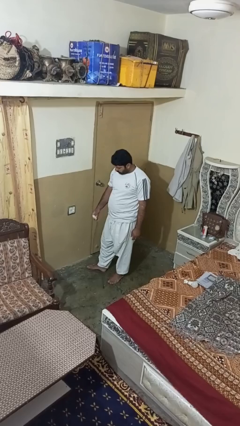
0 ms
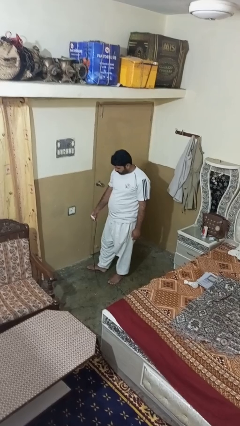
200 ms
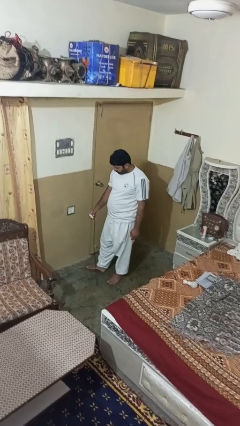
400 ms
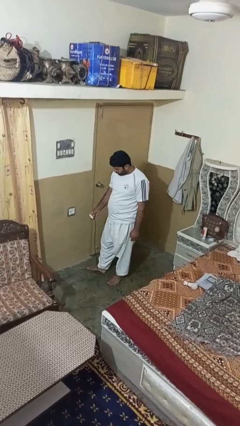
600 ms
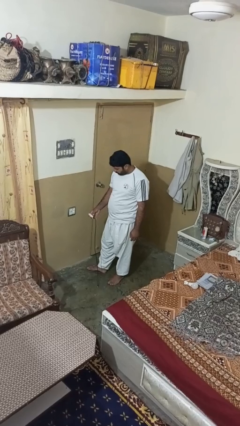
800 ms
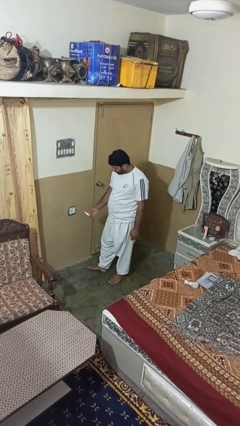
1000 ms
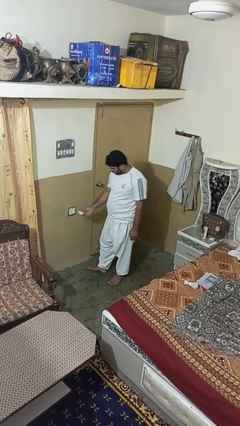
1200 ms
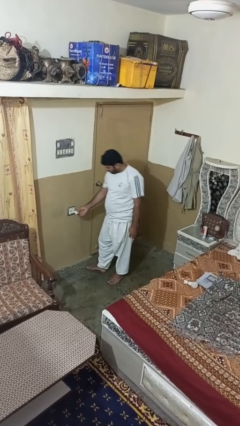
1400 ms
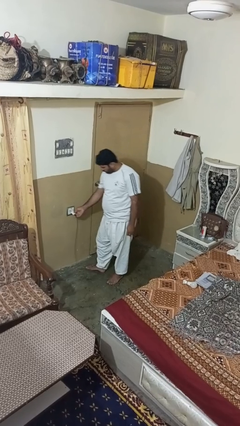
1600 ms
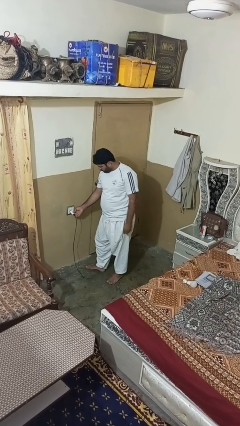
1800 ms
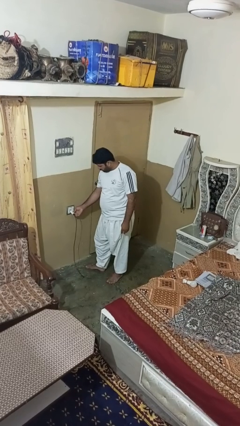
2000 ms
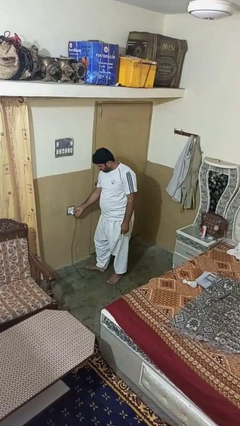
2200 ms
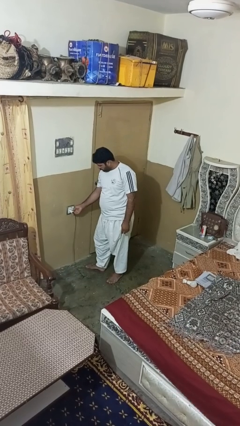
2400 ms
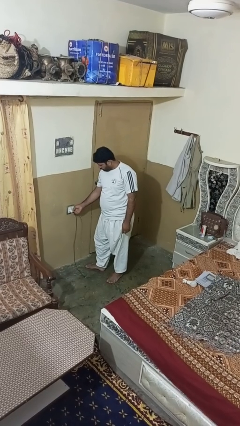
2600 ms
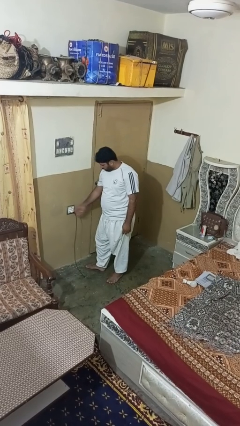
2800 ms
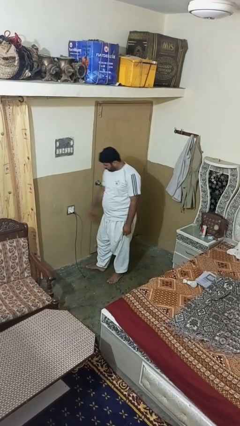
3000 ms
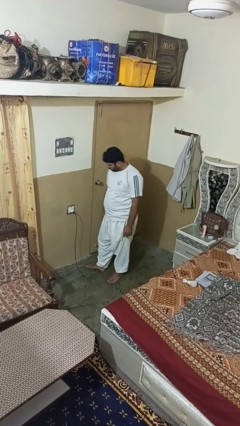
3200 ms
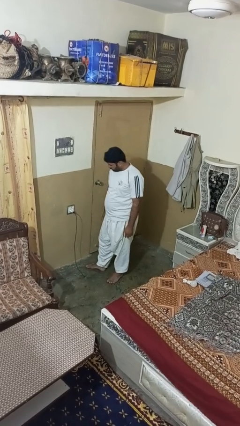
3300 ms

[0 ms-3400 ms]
person plugs into electrical socket

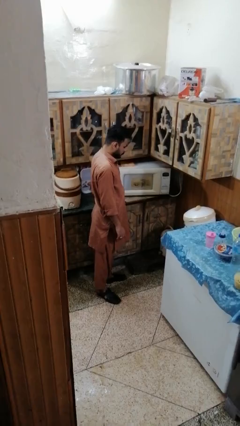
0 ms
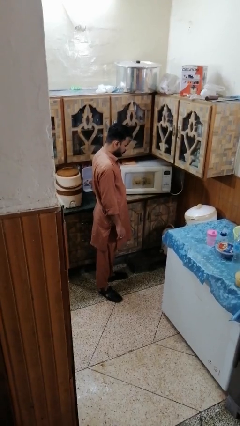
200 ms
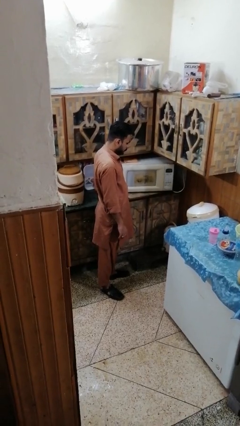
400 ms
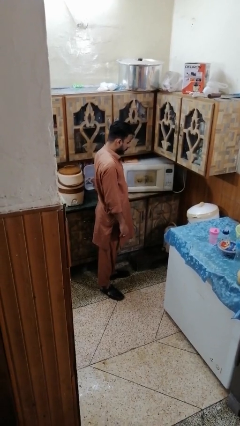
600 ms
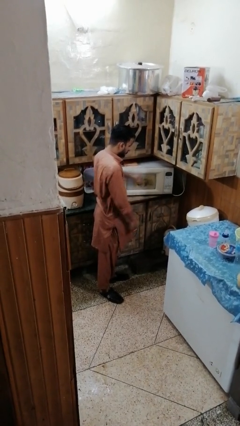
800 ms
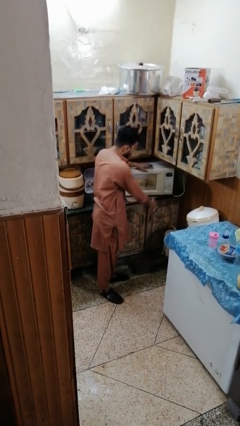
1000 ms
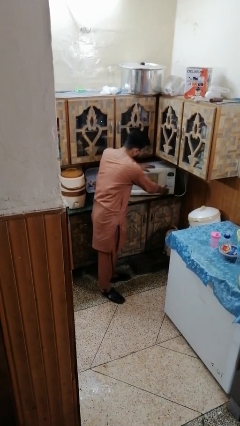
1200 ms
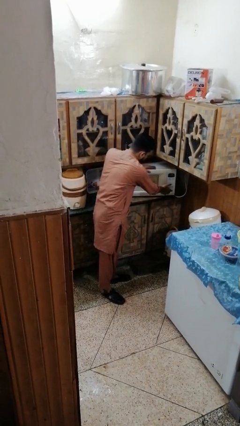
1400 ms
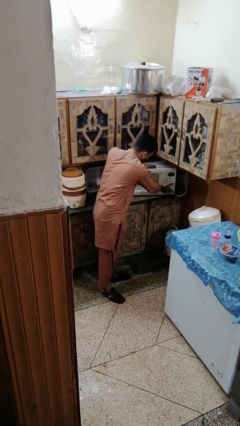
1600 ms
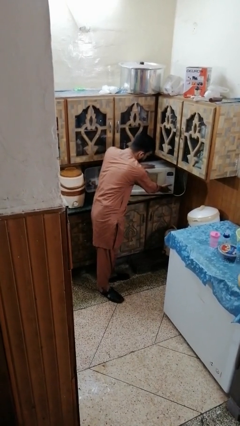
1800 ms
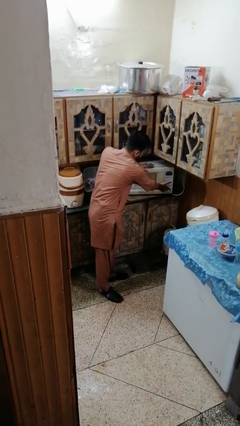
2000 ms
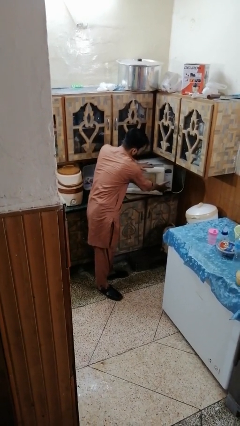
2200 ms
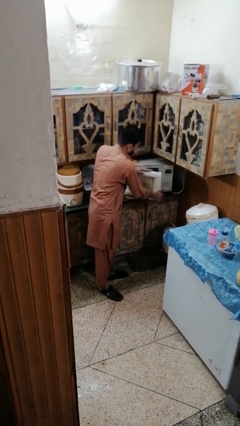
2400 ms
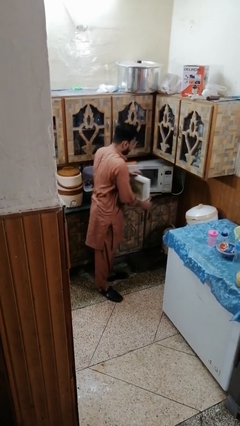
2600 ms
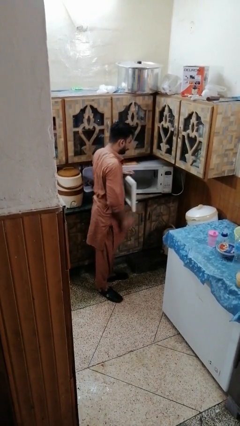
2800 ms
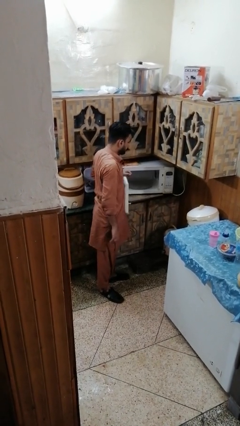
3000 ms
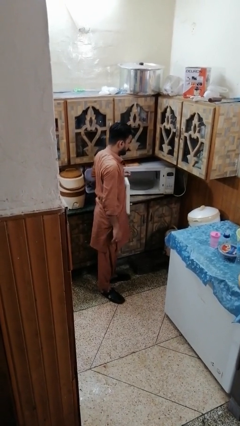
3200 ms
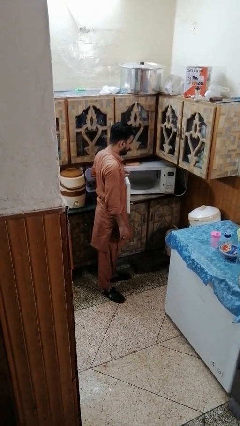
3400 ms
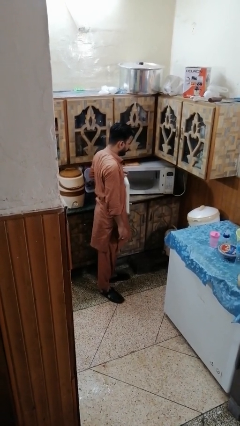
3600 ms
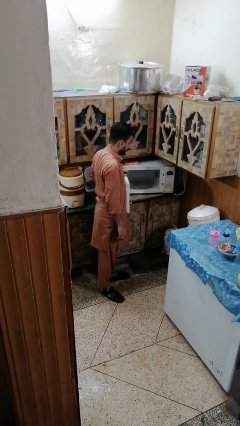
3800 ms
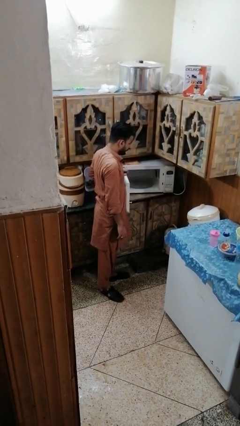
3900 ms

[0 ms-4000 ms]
person opens microwave

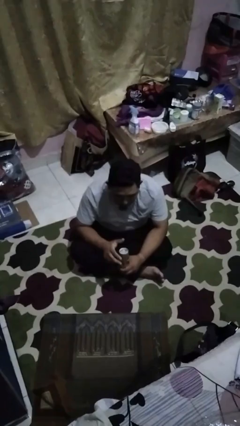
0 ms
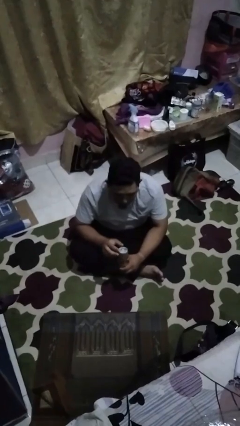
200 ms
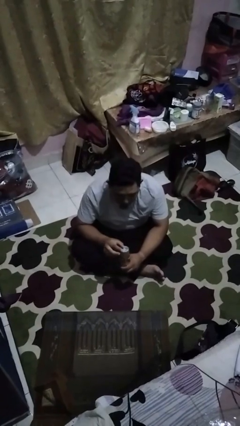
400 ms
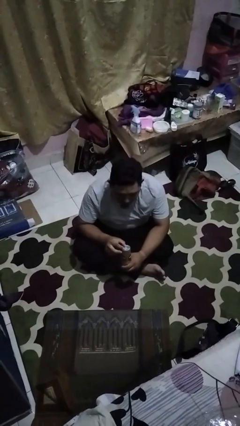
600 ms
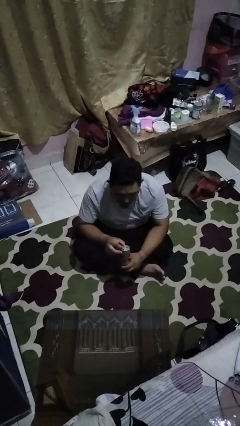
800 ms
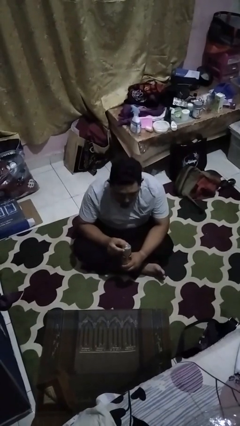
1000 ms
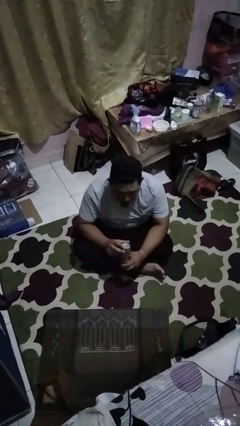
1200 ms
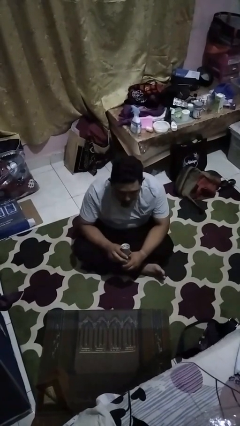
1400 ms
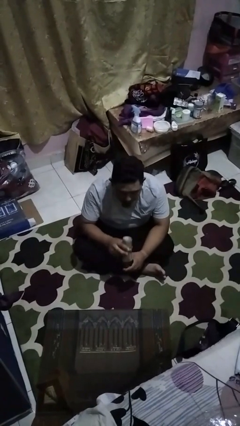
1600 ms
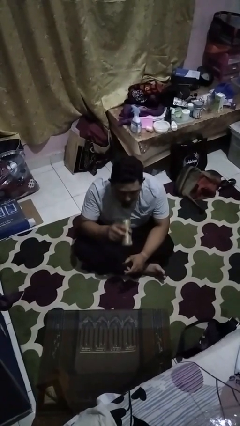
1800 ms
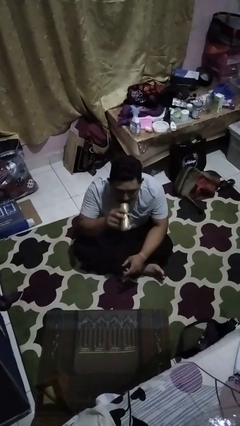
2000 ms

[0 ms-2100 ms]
person opens beverage can

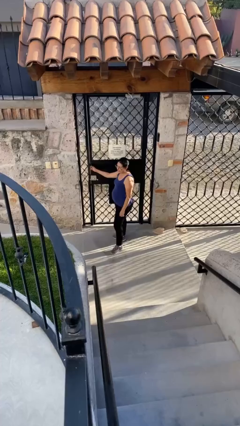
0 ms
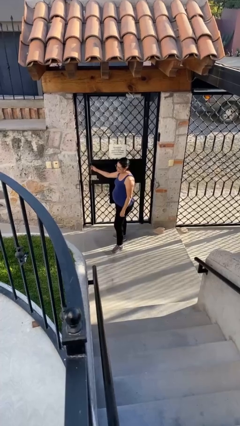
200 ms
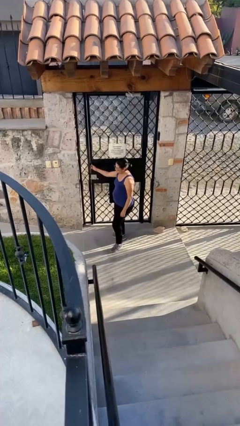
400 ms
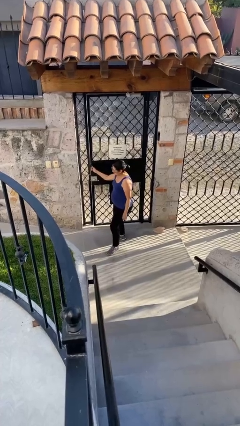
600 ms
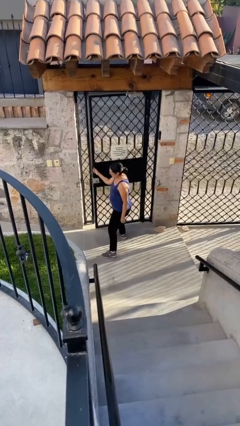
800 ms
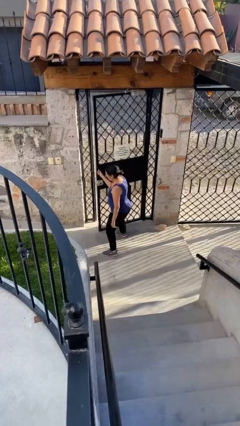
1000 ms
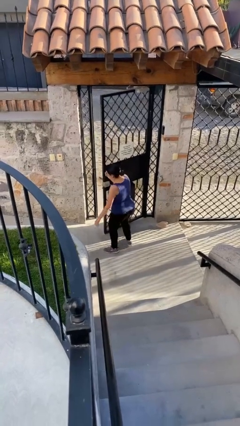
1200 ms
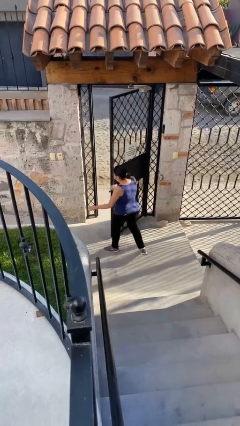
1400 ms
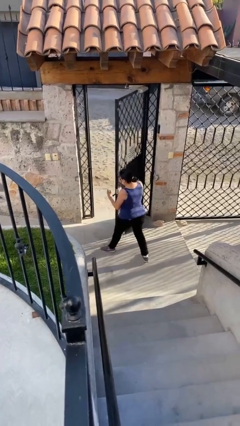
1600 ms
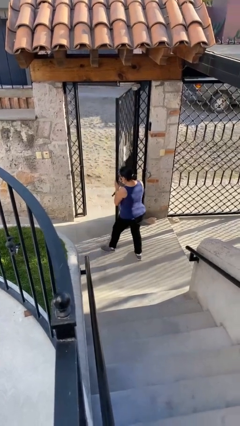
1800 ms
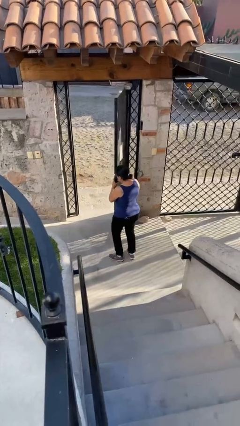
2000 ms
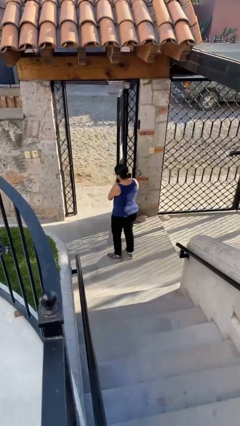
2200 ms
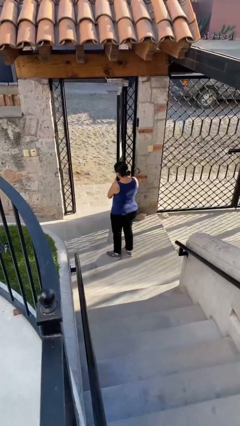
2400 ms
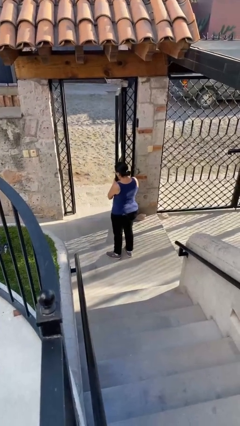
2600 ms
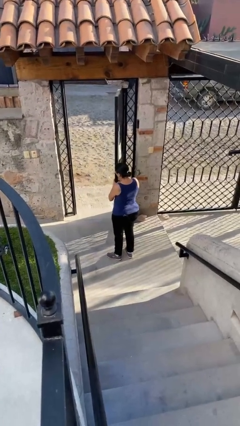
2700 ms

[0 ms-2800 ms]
person opens facility door

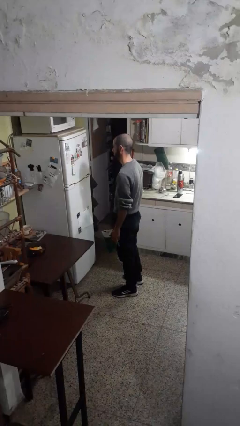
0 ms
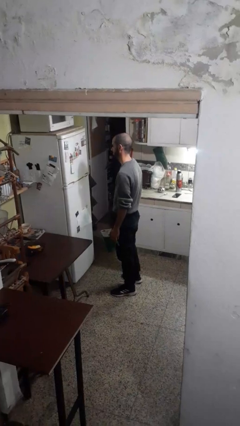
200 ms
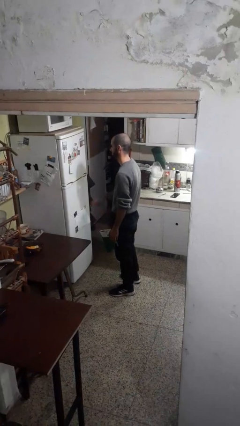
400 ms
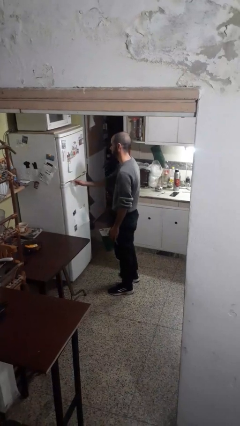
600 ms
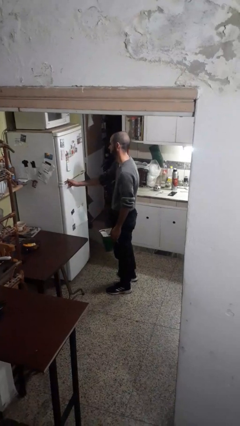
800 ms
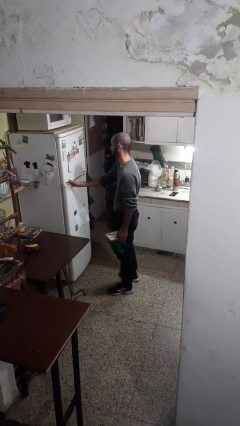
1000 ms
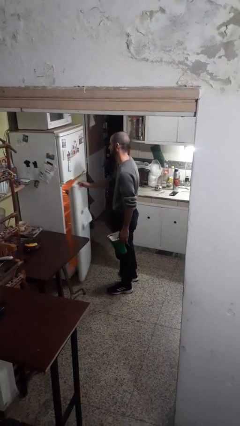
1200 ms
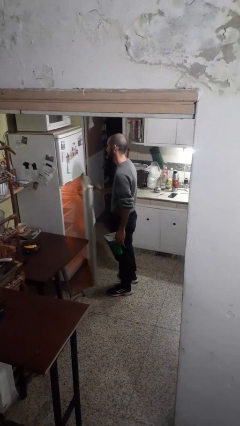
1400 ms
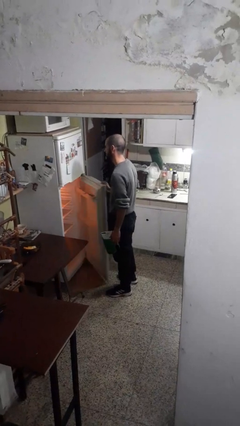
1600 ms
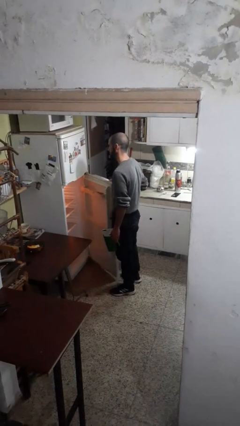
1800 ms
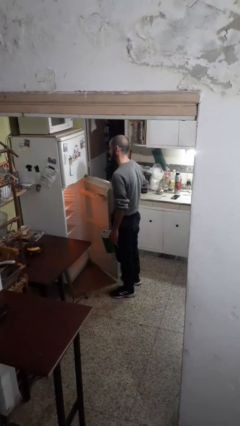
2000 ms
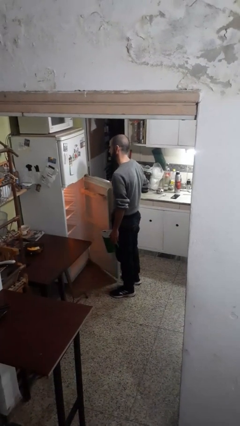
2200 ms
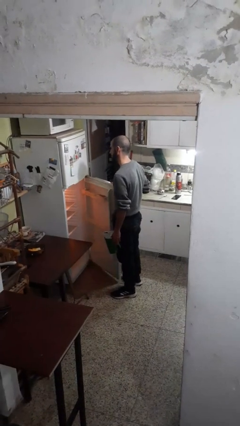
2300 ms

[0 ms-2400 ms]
person opens refrigerator

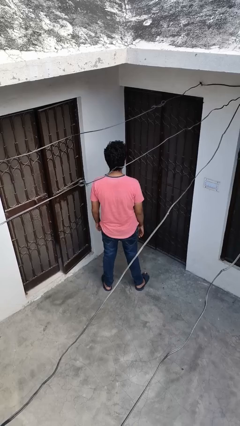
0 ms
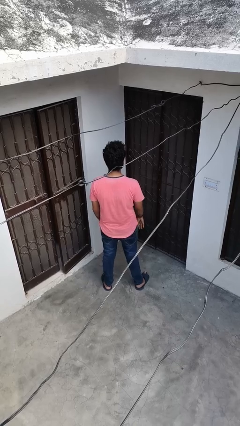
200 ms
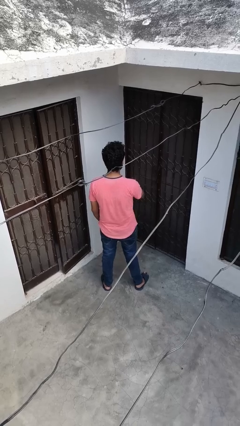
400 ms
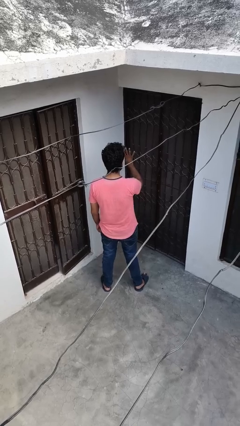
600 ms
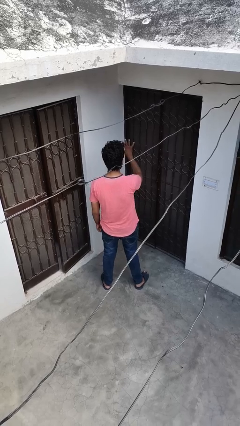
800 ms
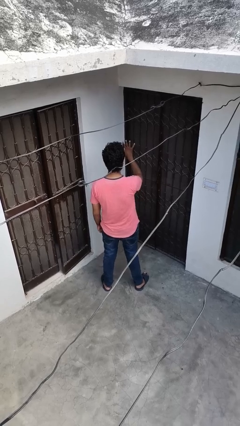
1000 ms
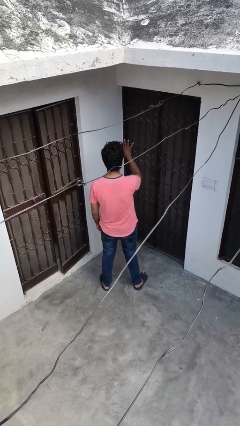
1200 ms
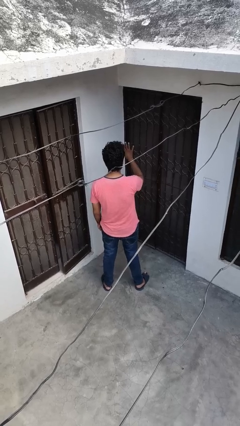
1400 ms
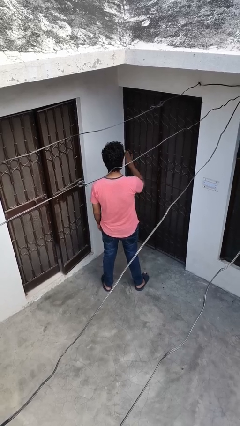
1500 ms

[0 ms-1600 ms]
person gestures number four

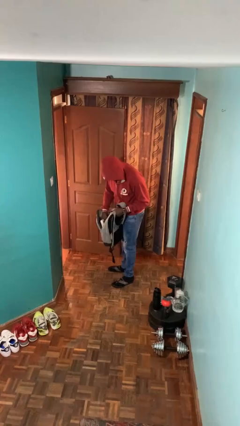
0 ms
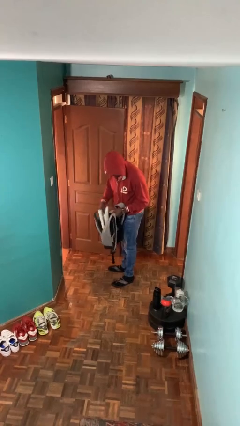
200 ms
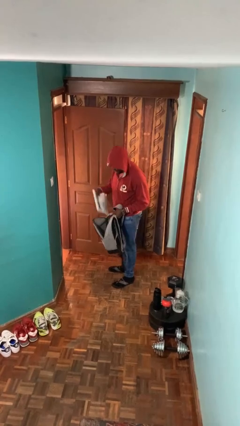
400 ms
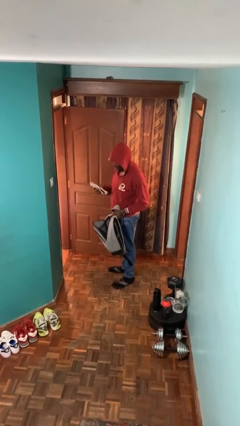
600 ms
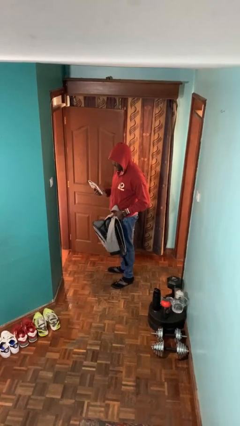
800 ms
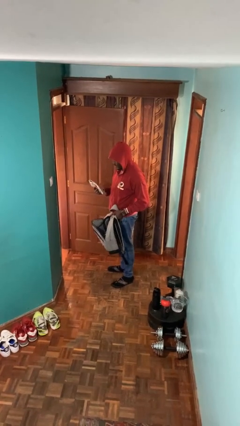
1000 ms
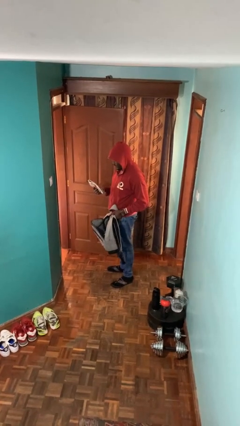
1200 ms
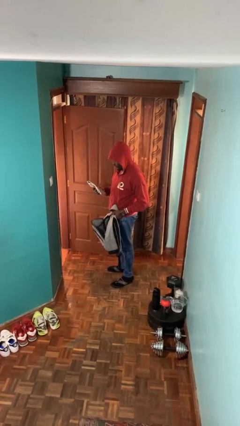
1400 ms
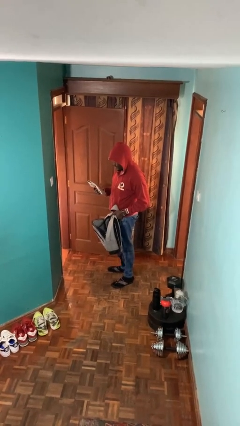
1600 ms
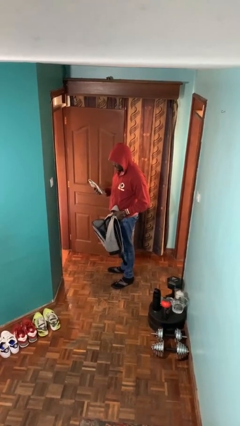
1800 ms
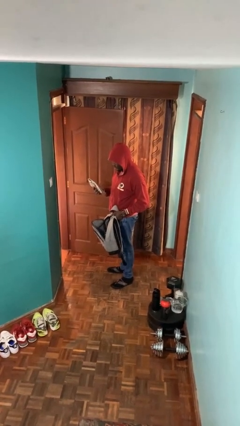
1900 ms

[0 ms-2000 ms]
person takes object from backpack
